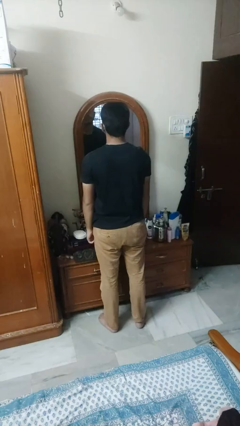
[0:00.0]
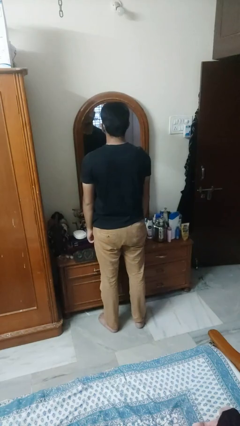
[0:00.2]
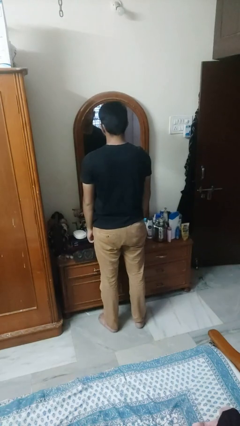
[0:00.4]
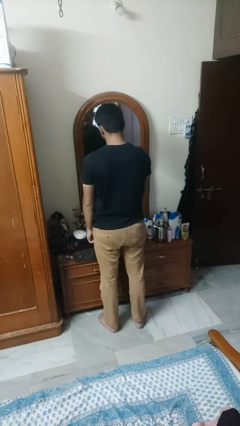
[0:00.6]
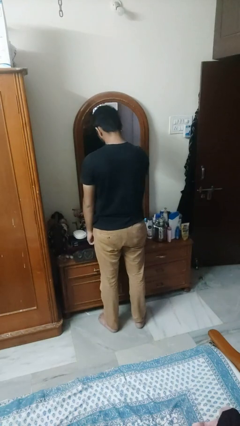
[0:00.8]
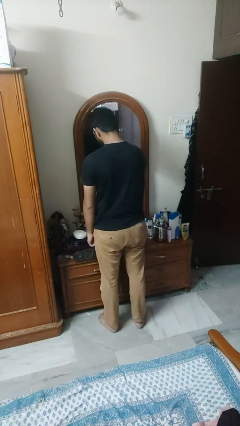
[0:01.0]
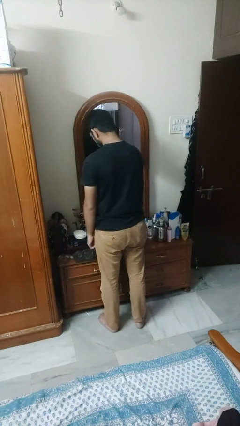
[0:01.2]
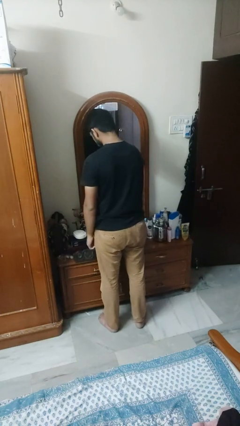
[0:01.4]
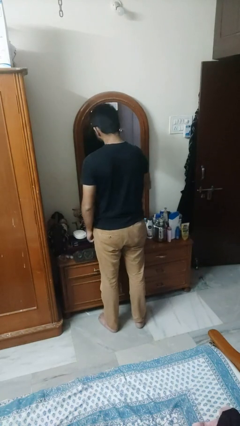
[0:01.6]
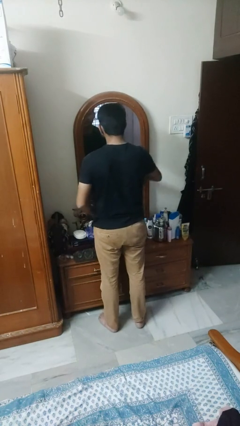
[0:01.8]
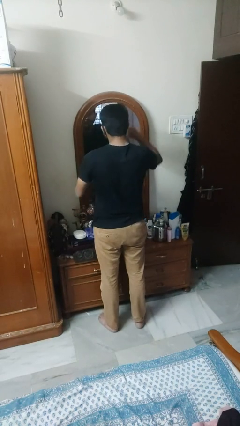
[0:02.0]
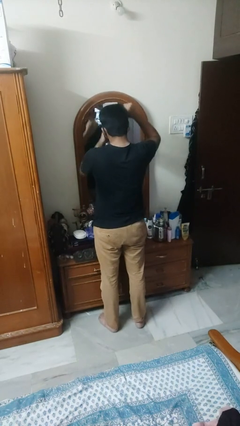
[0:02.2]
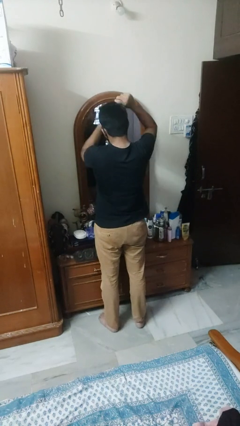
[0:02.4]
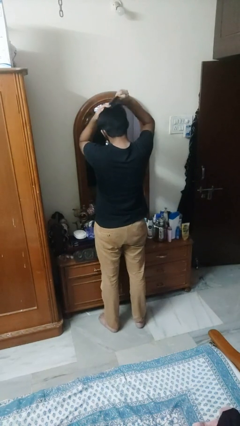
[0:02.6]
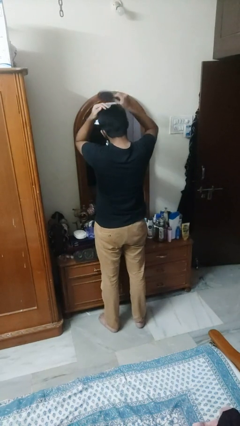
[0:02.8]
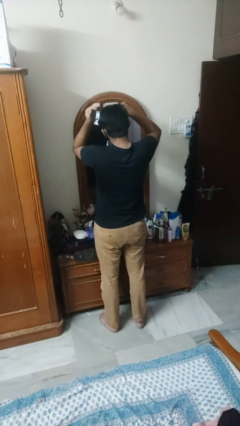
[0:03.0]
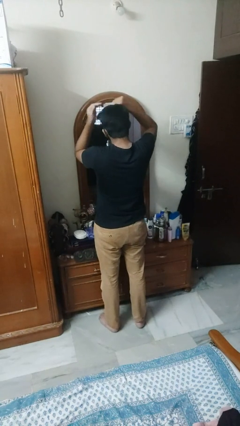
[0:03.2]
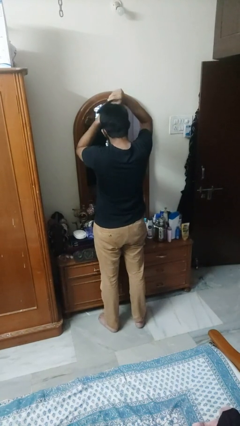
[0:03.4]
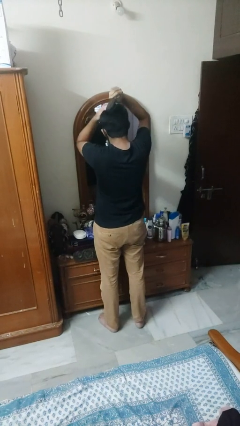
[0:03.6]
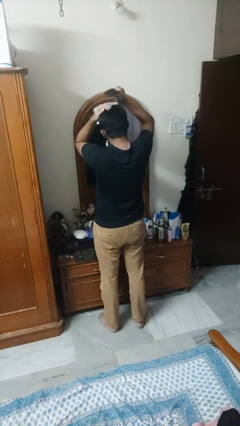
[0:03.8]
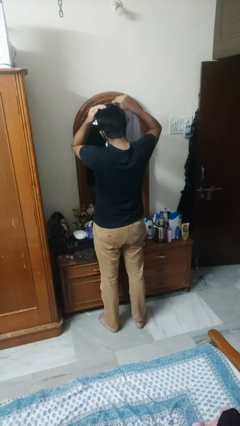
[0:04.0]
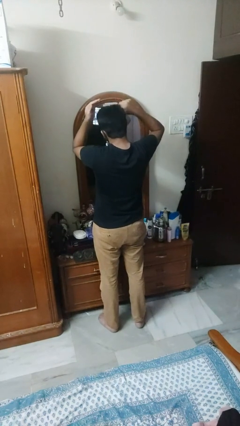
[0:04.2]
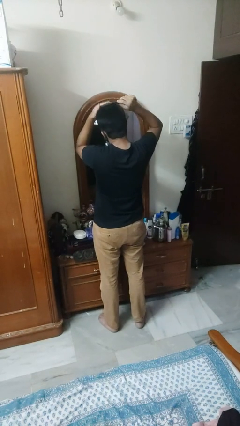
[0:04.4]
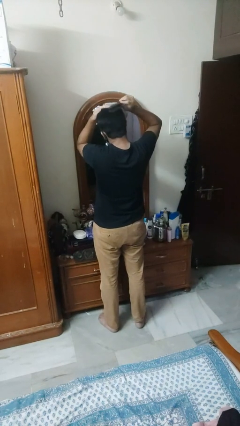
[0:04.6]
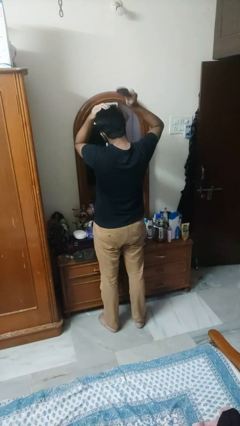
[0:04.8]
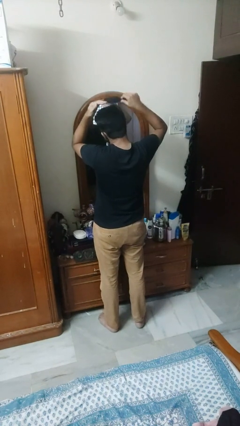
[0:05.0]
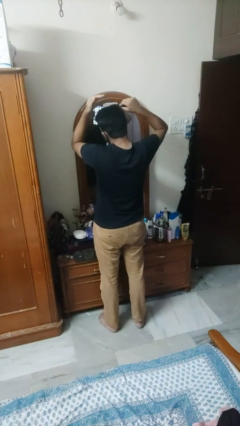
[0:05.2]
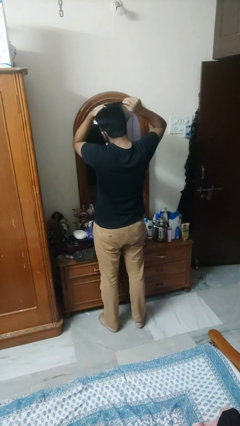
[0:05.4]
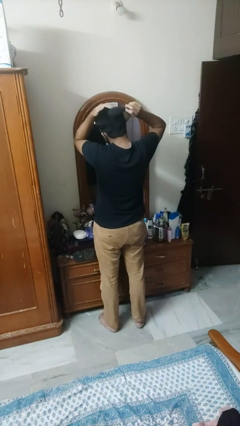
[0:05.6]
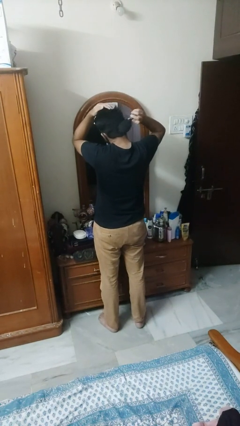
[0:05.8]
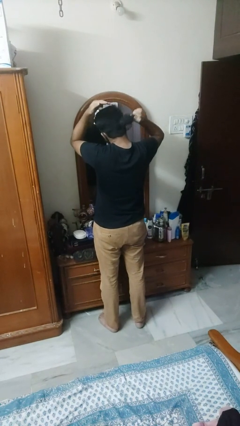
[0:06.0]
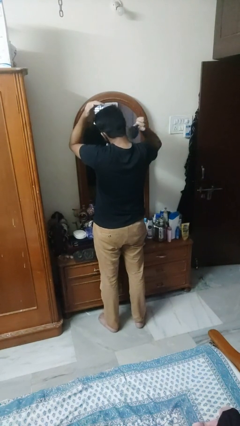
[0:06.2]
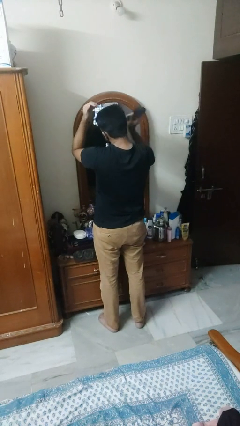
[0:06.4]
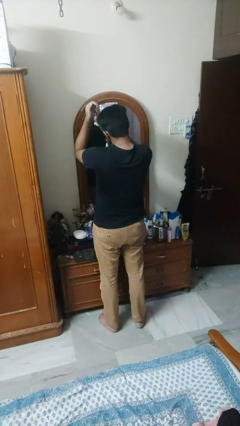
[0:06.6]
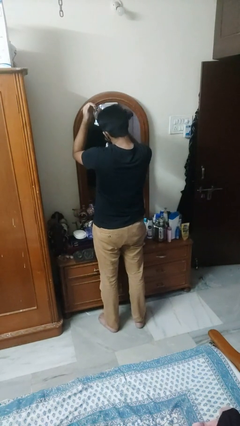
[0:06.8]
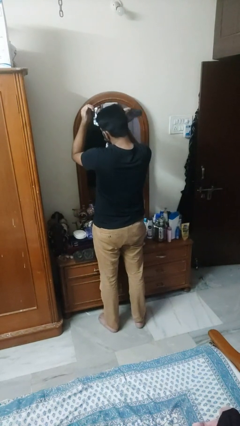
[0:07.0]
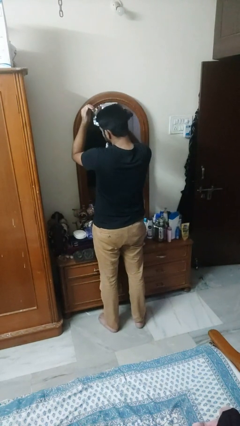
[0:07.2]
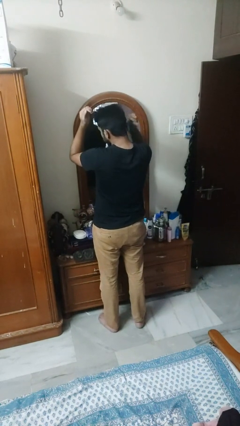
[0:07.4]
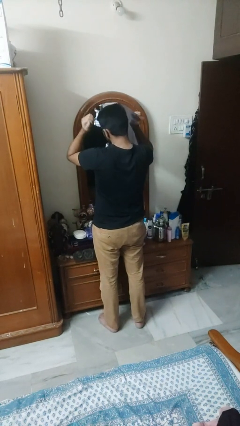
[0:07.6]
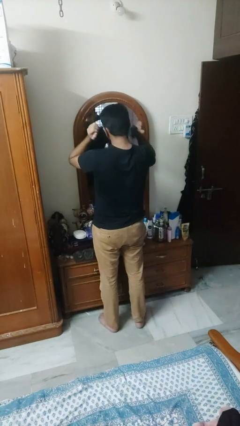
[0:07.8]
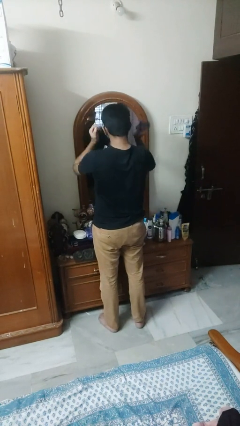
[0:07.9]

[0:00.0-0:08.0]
person brushes hair

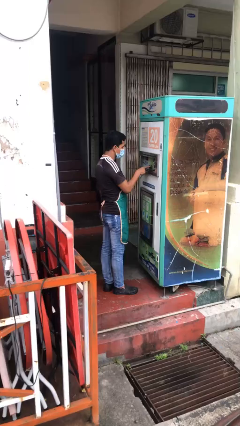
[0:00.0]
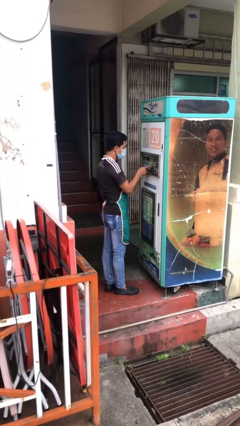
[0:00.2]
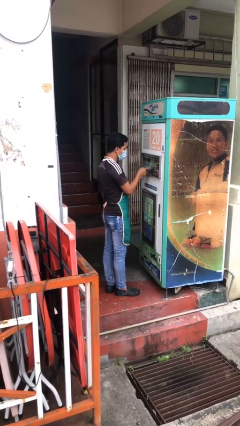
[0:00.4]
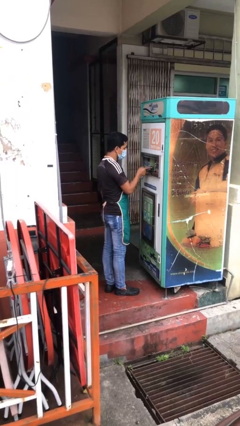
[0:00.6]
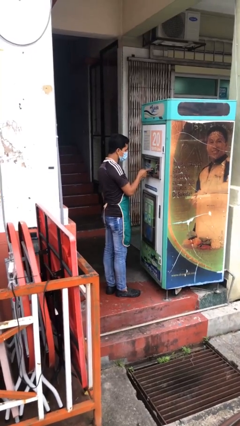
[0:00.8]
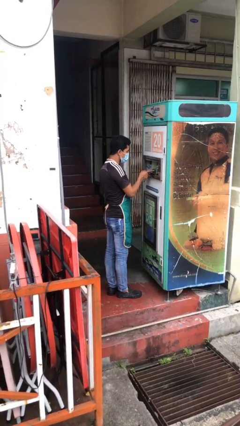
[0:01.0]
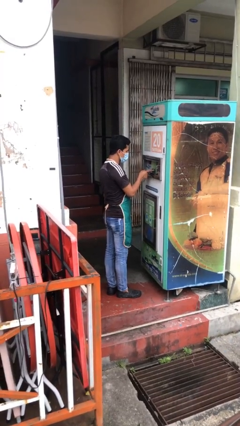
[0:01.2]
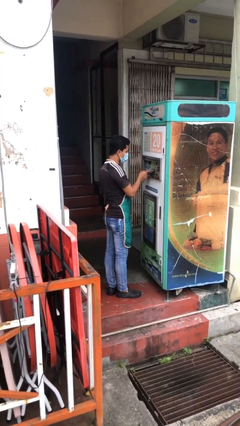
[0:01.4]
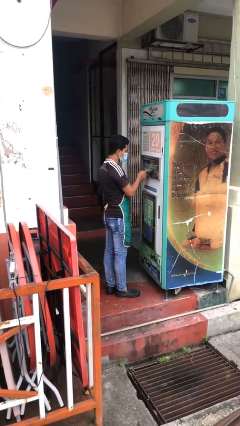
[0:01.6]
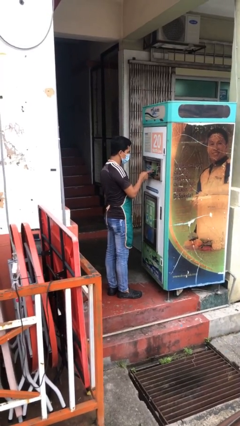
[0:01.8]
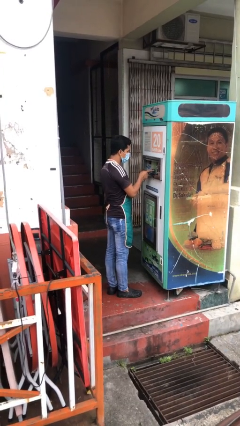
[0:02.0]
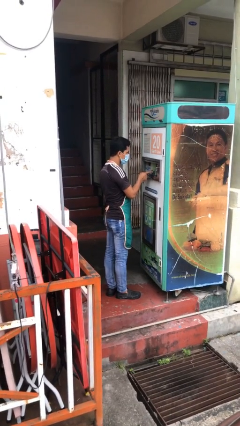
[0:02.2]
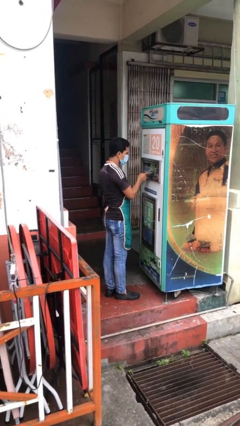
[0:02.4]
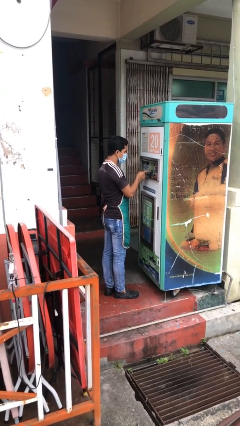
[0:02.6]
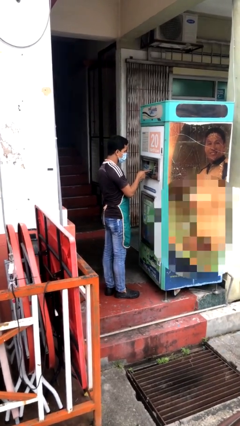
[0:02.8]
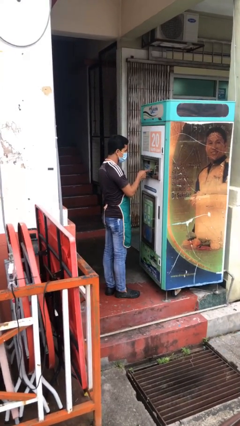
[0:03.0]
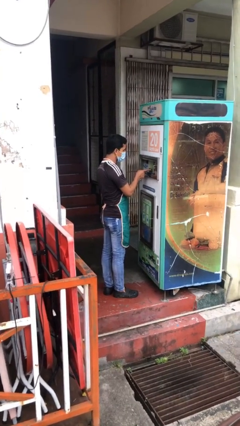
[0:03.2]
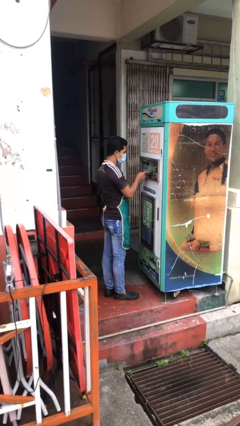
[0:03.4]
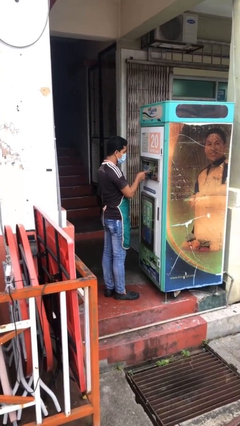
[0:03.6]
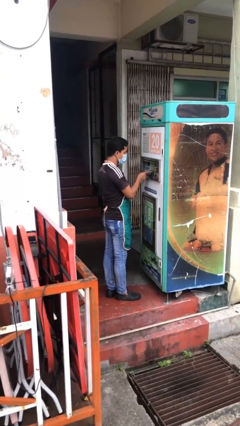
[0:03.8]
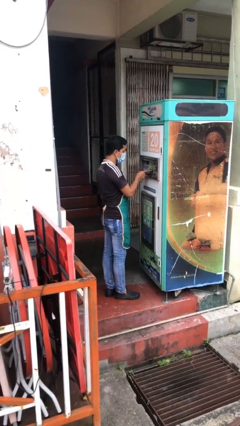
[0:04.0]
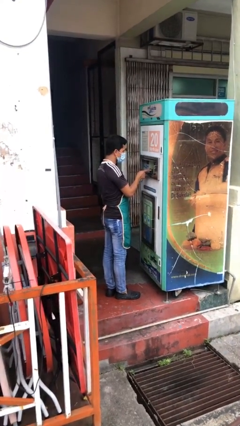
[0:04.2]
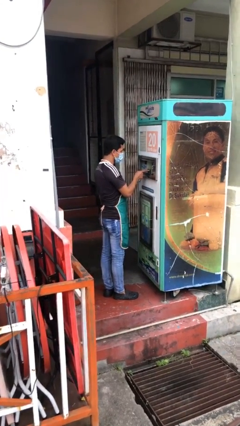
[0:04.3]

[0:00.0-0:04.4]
person purchases from machine

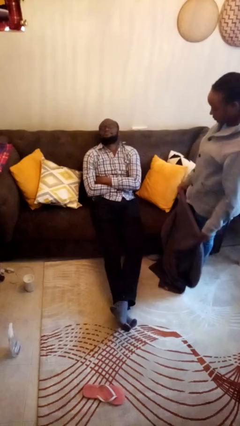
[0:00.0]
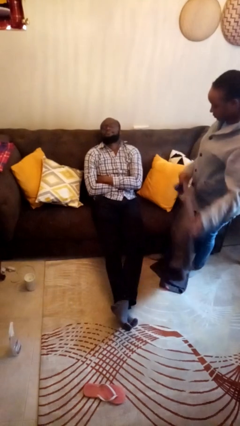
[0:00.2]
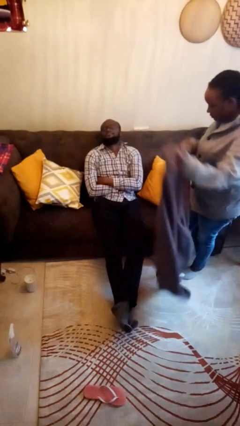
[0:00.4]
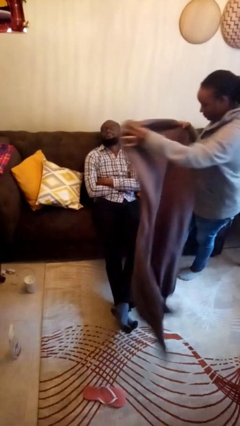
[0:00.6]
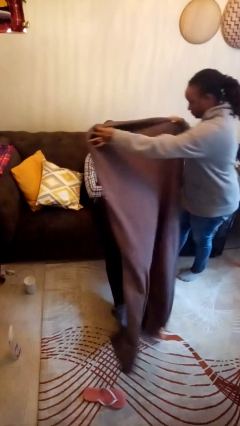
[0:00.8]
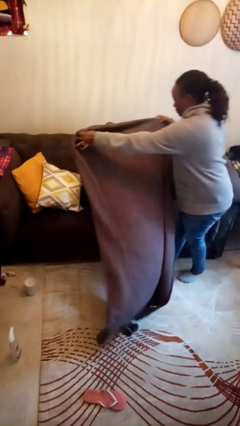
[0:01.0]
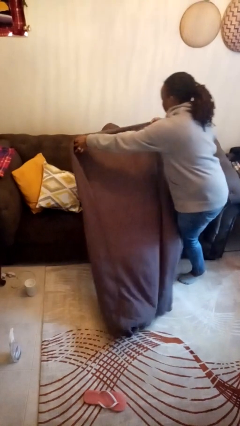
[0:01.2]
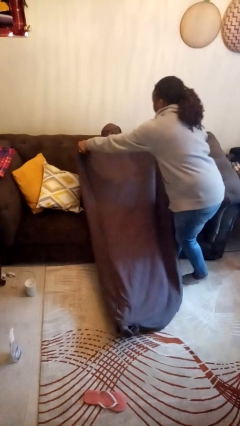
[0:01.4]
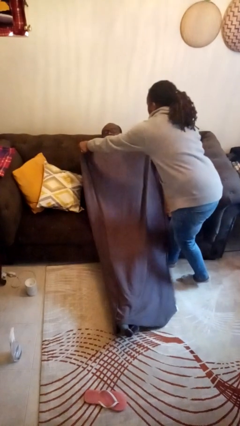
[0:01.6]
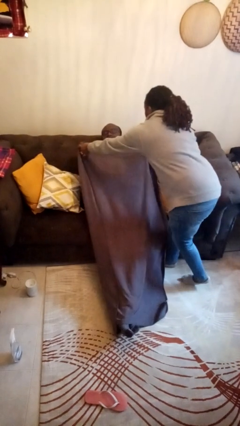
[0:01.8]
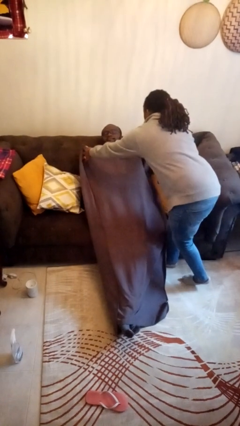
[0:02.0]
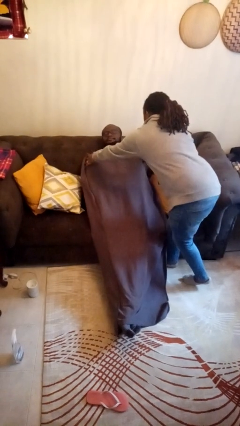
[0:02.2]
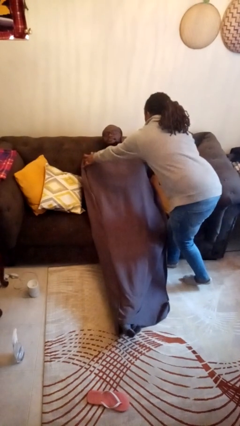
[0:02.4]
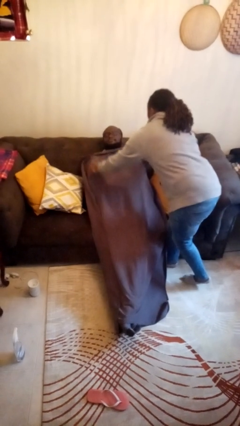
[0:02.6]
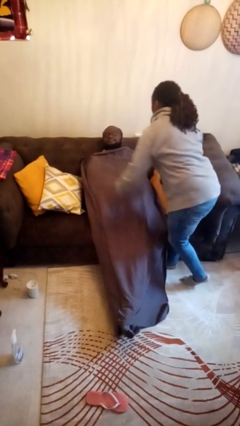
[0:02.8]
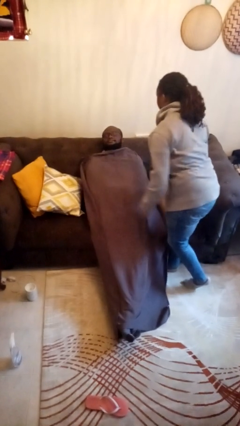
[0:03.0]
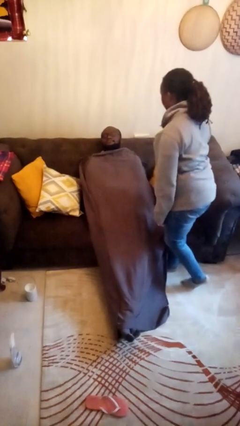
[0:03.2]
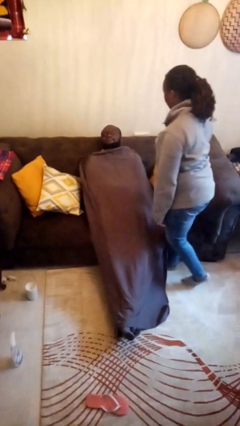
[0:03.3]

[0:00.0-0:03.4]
person covers friend with blanket

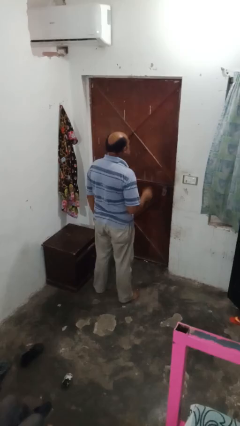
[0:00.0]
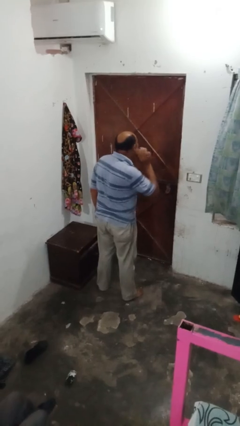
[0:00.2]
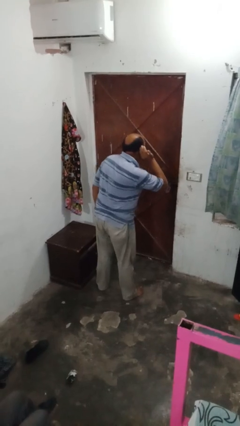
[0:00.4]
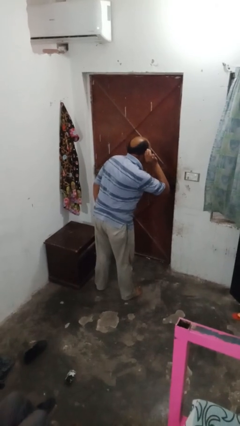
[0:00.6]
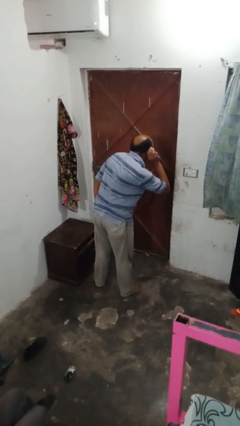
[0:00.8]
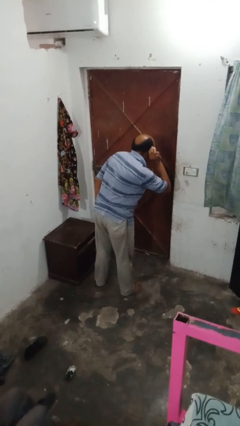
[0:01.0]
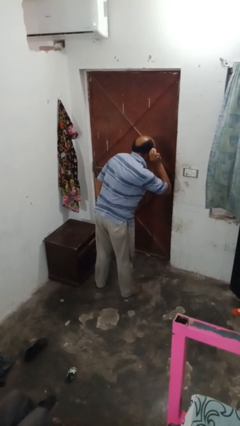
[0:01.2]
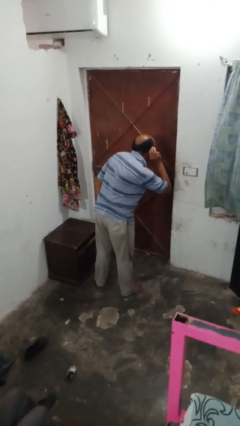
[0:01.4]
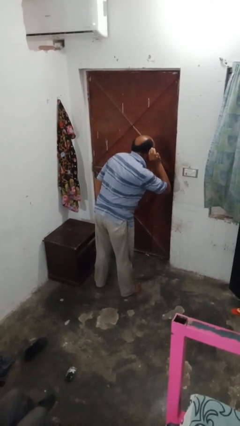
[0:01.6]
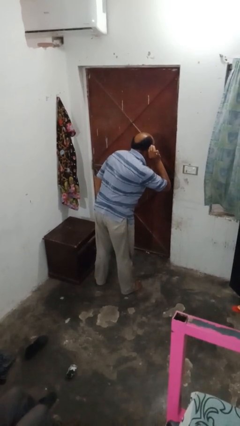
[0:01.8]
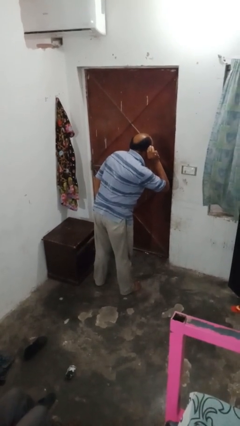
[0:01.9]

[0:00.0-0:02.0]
person gestures listen closely
